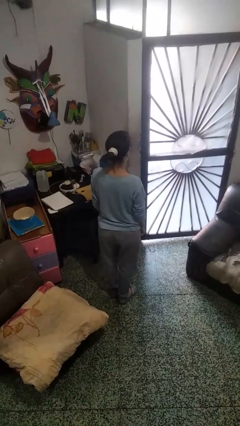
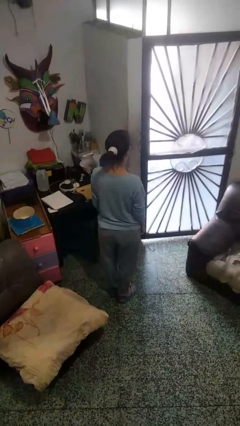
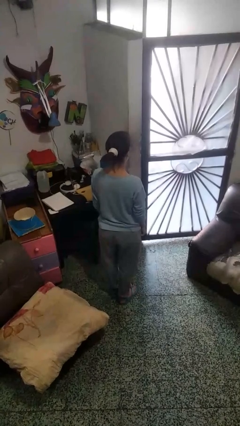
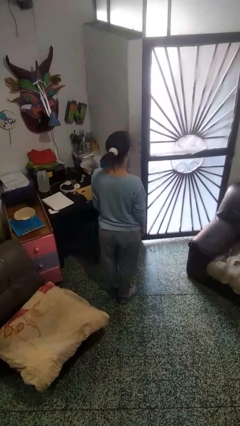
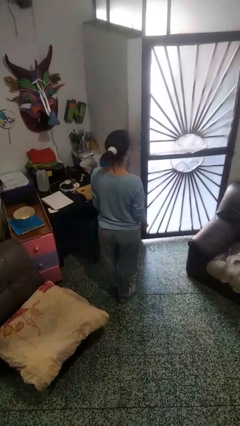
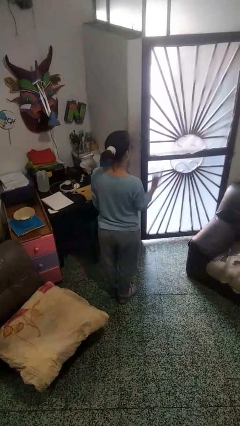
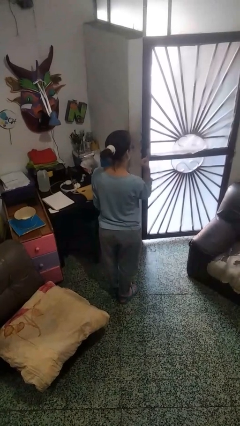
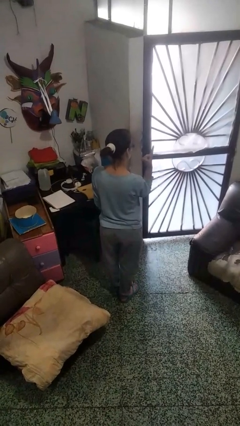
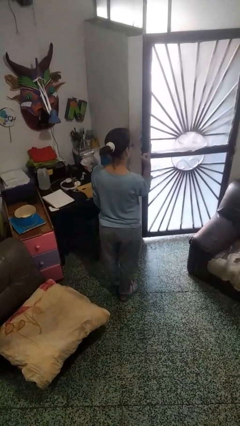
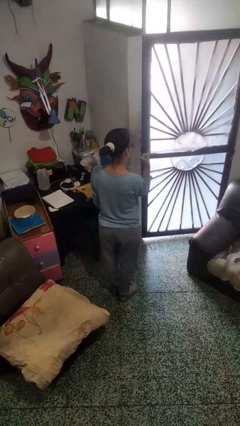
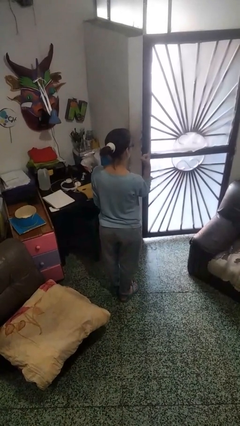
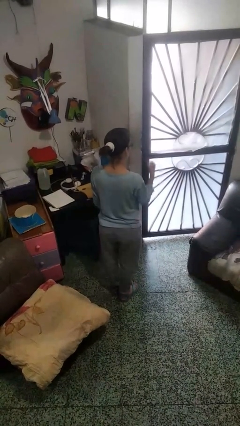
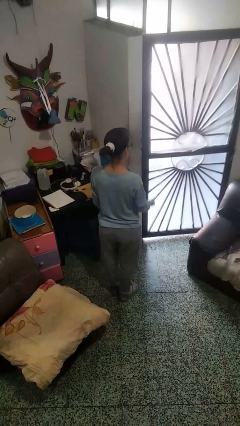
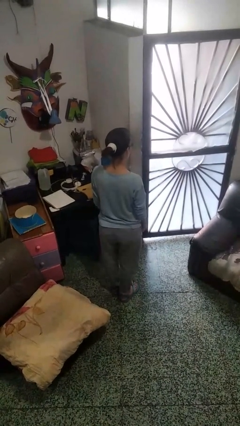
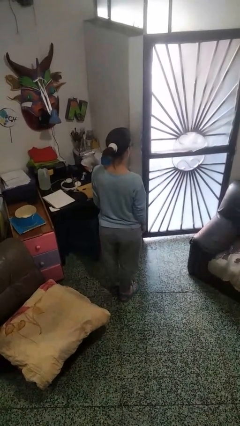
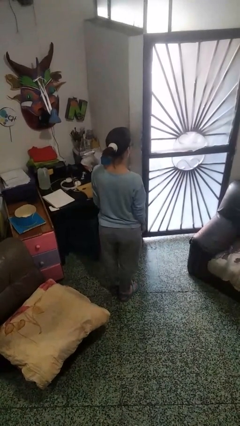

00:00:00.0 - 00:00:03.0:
person gestures number one

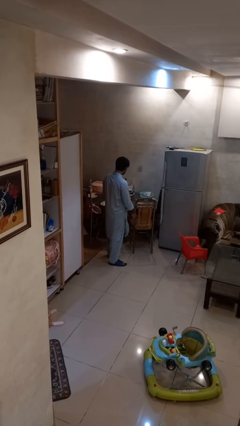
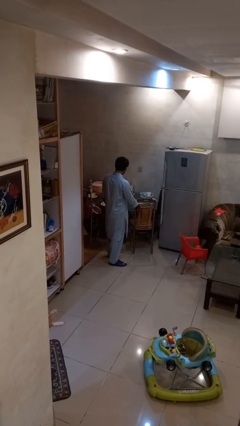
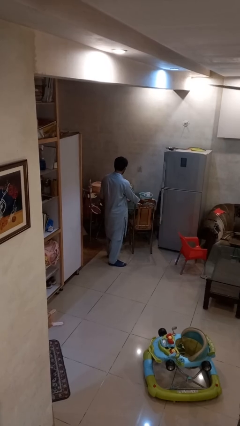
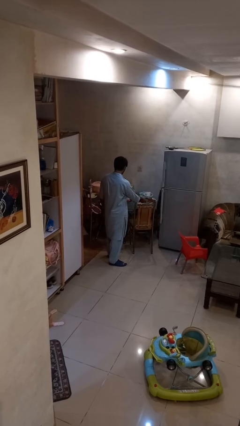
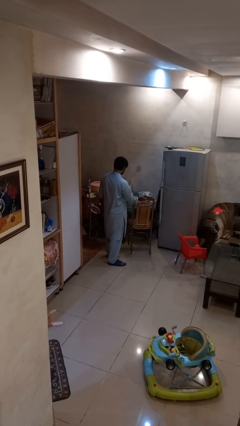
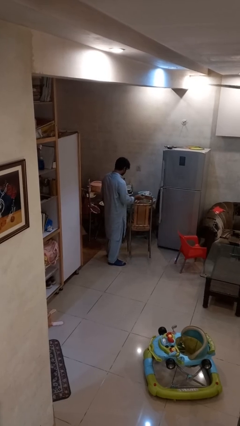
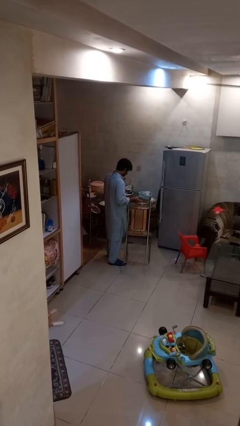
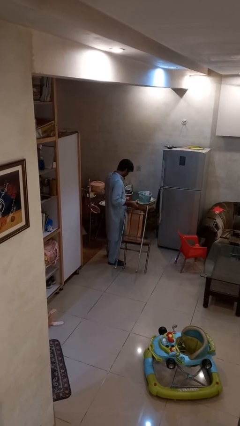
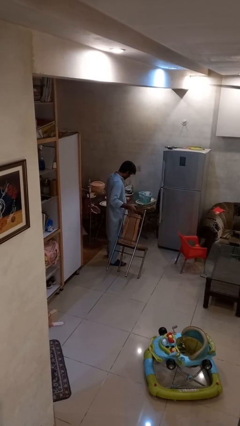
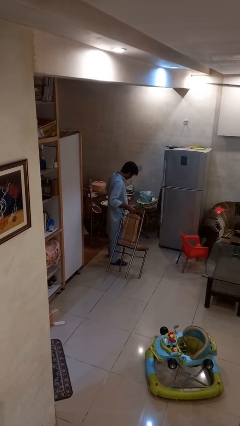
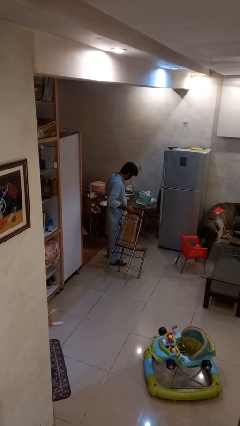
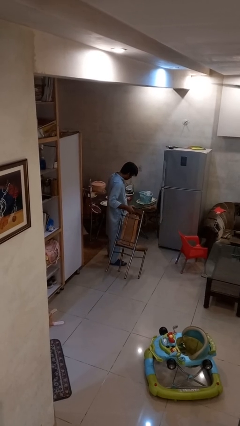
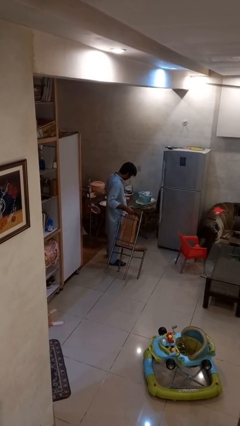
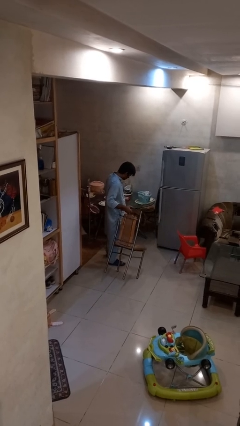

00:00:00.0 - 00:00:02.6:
person pulls out chair

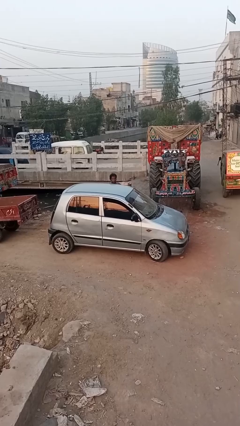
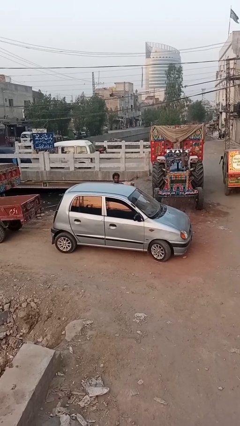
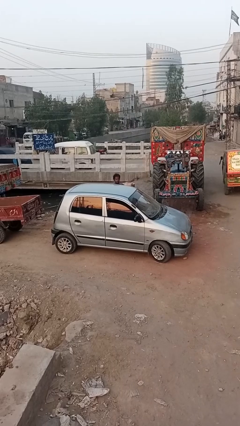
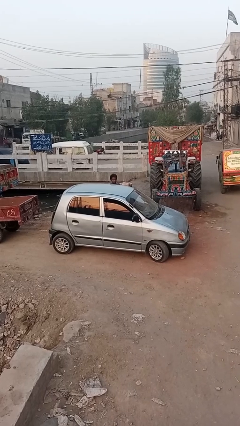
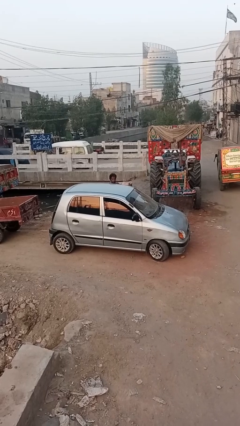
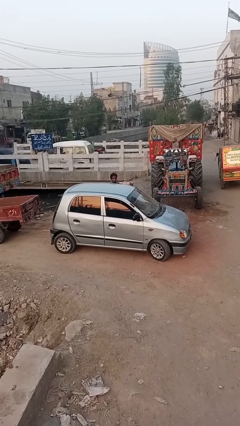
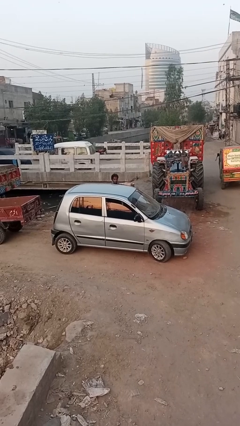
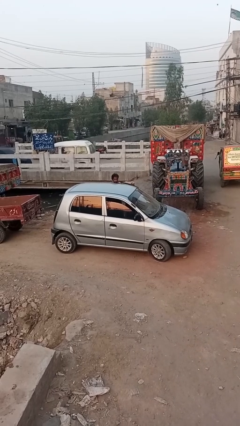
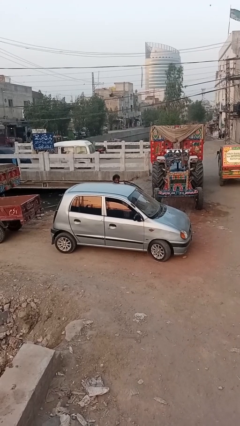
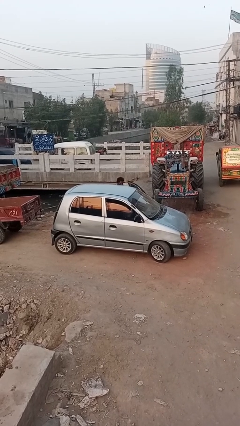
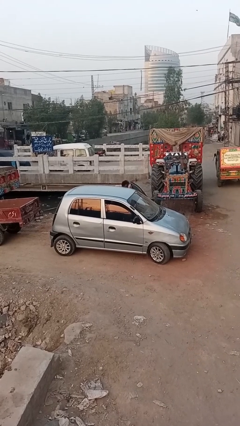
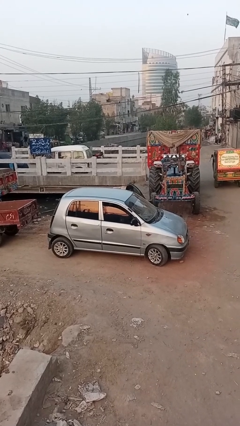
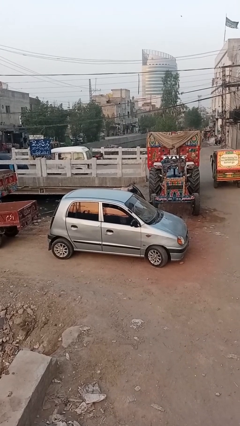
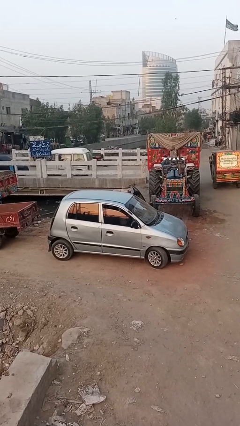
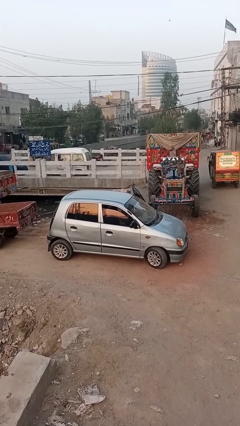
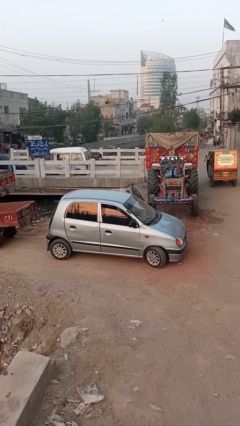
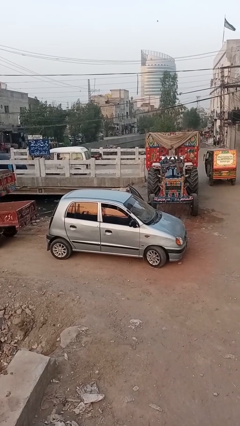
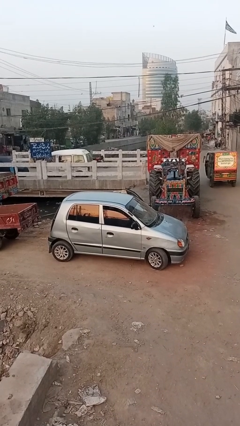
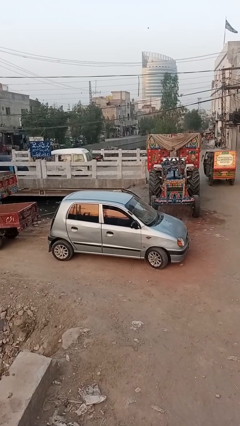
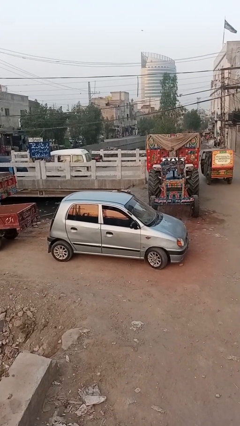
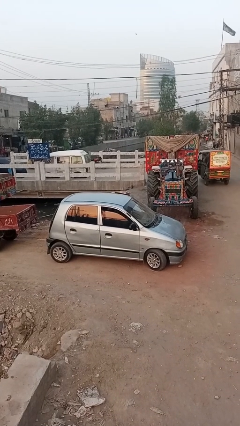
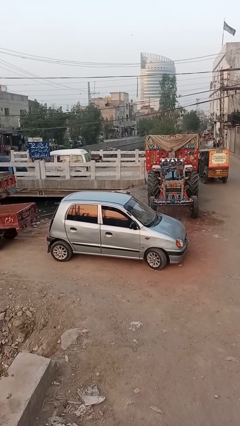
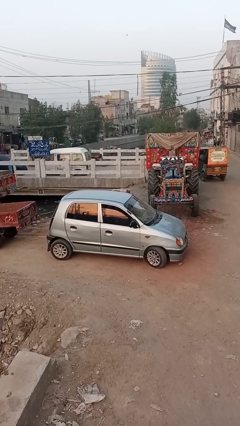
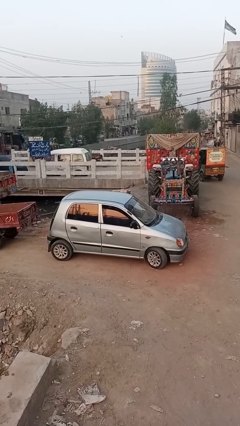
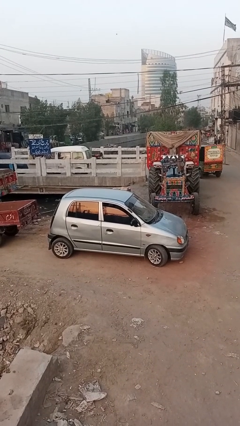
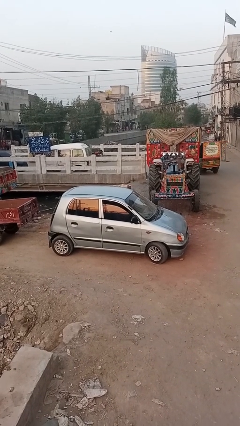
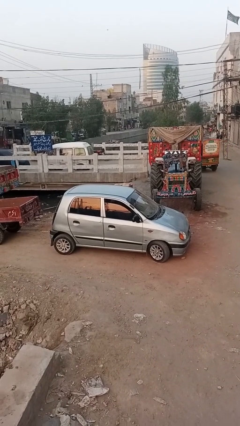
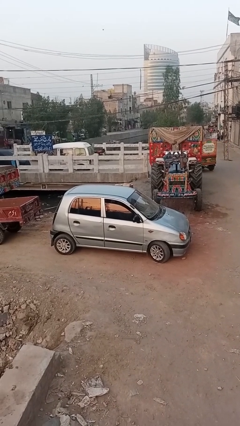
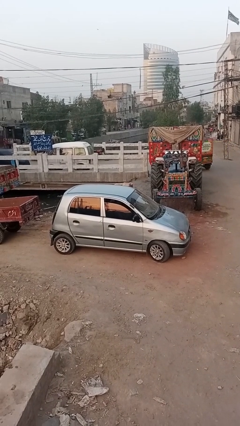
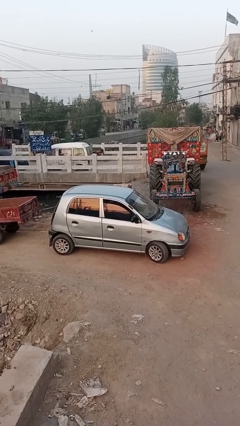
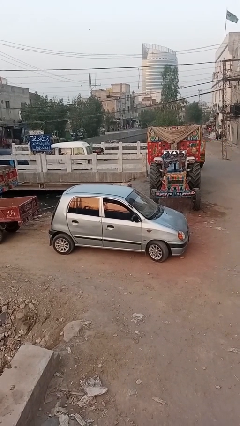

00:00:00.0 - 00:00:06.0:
car picks up person

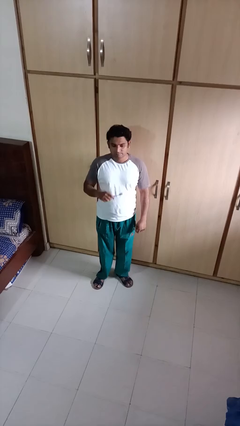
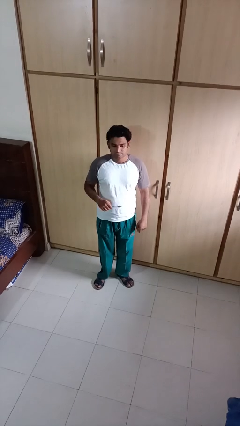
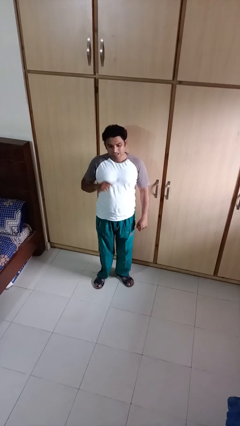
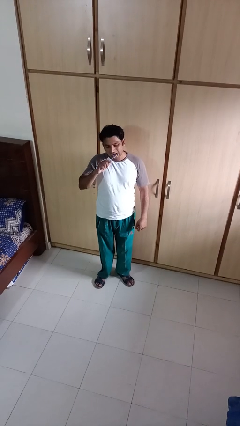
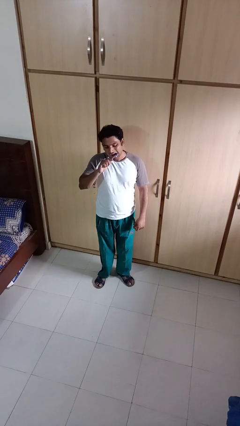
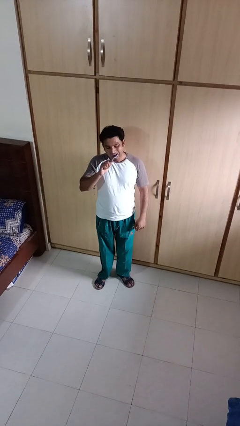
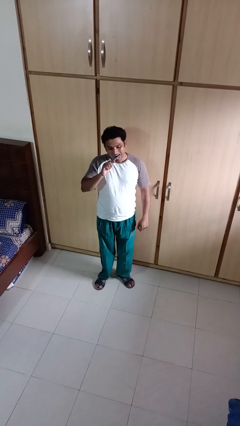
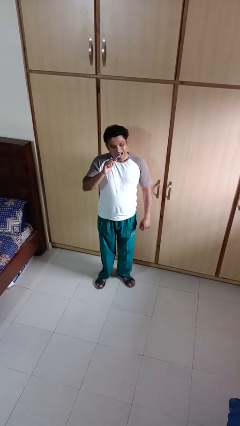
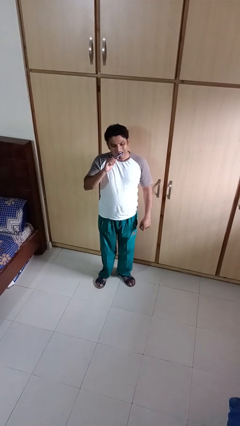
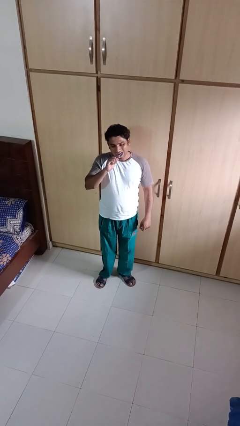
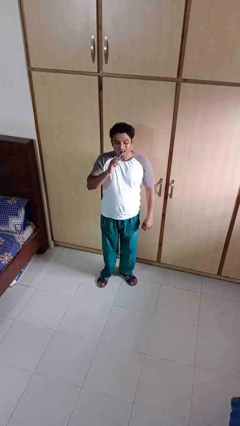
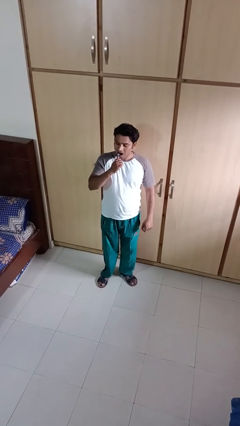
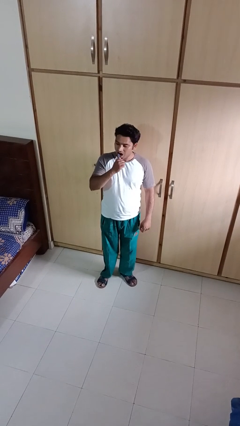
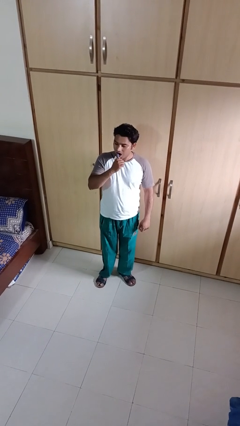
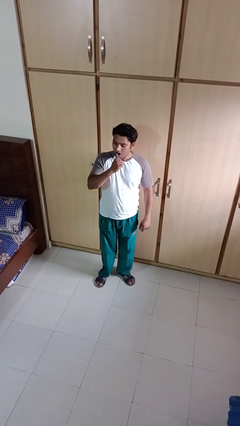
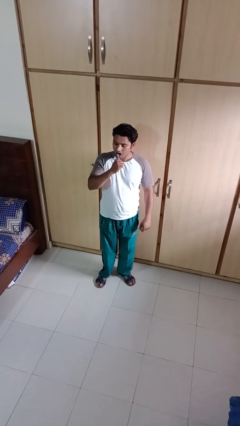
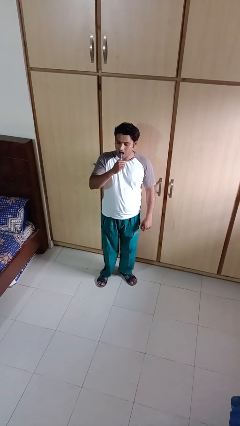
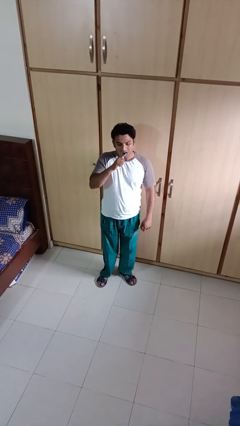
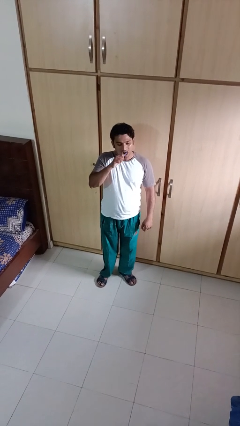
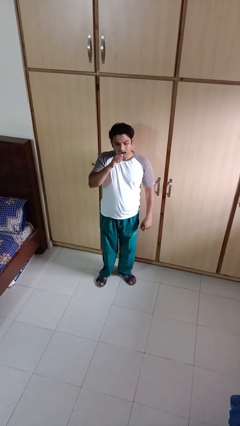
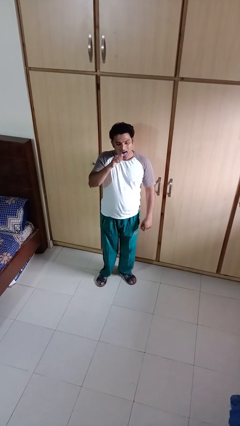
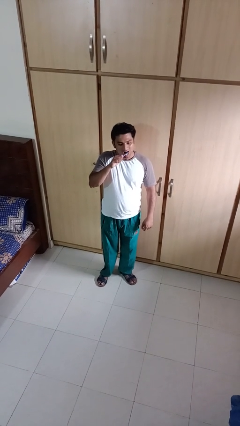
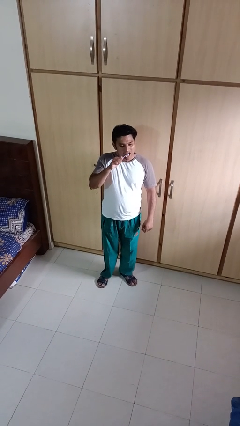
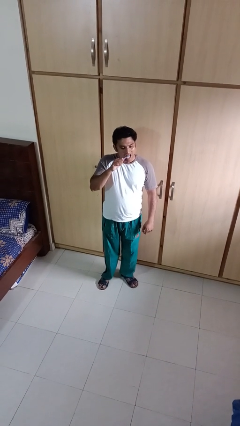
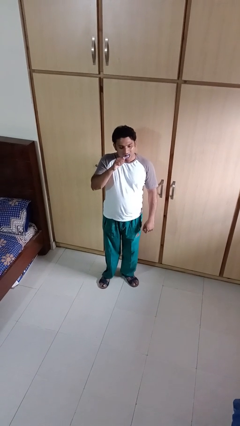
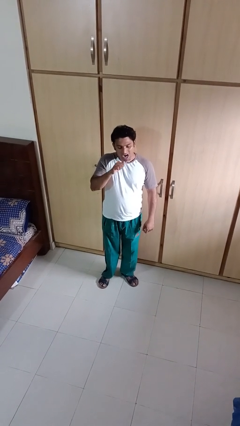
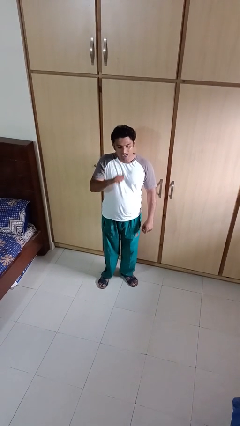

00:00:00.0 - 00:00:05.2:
person brushes teeth

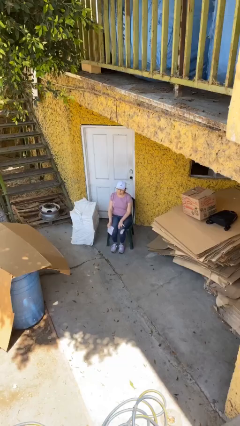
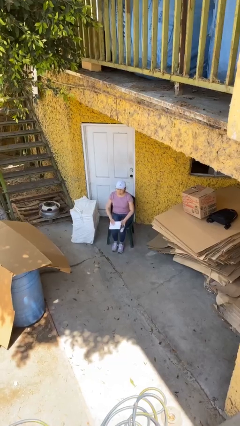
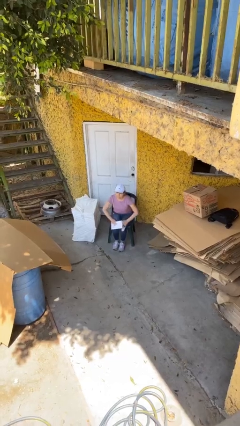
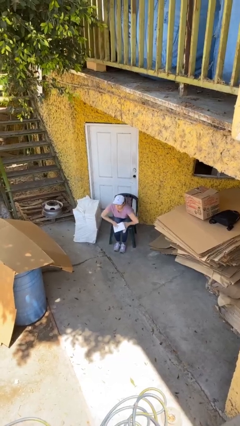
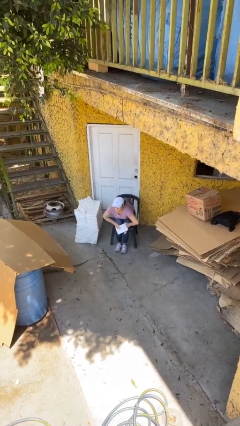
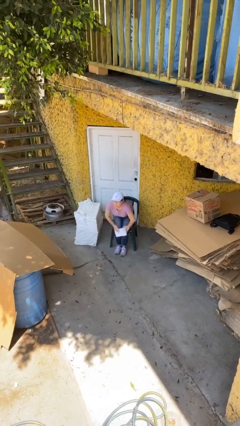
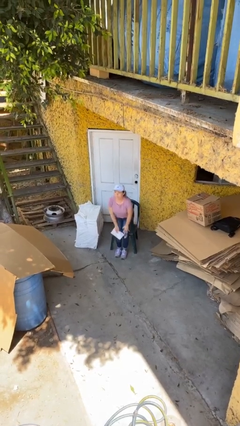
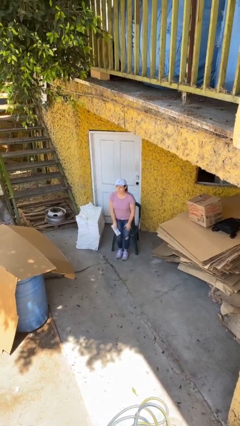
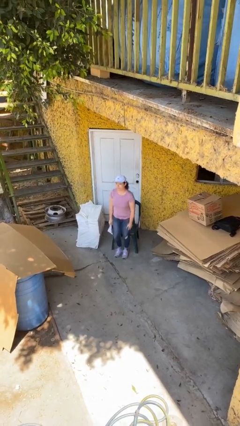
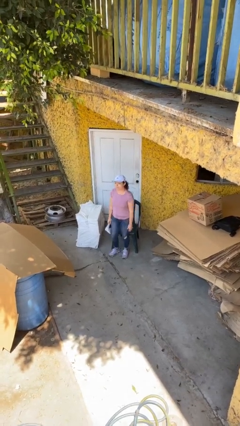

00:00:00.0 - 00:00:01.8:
person stands up
